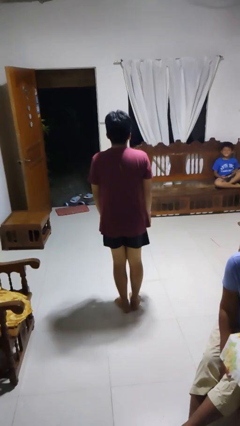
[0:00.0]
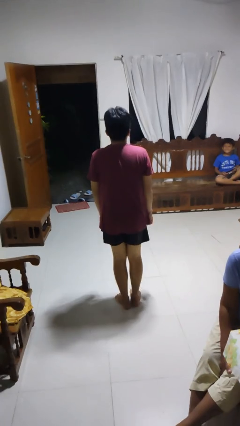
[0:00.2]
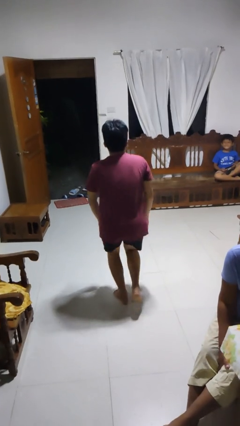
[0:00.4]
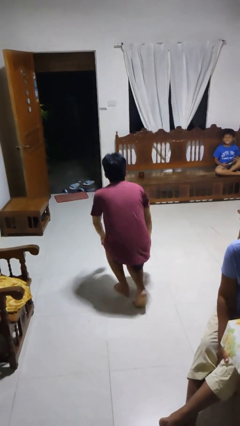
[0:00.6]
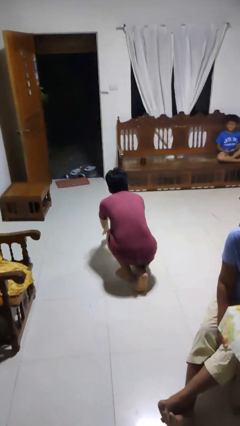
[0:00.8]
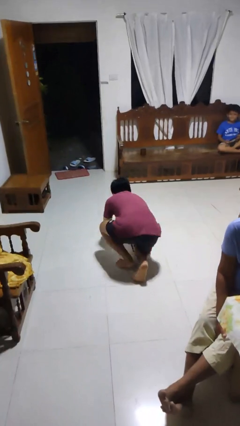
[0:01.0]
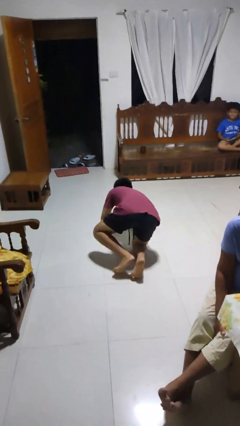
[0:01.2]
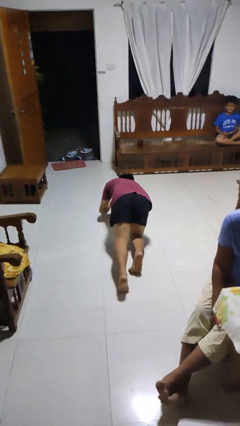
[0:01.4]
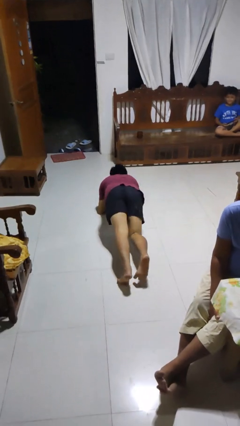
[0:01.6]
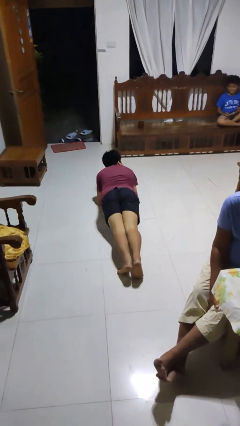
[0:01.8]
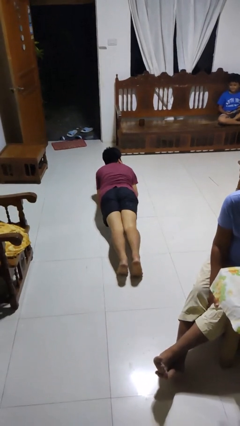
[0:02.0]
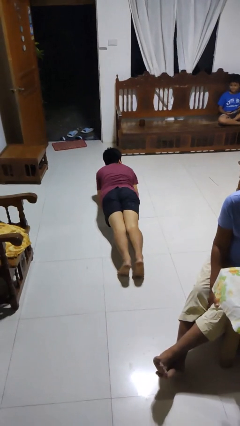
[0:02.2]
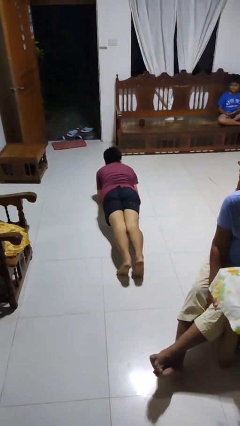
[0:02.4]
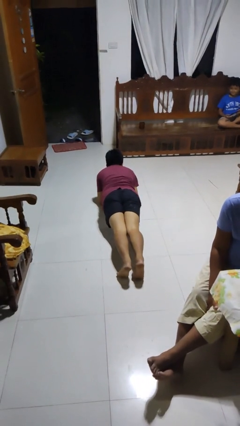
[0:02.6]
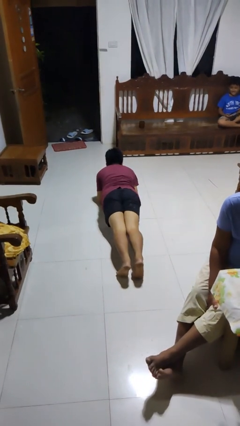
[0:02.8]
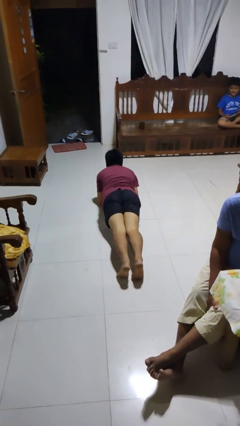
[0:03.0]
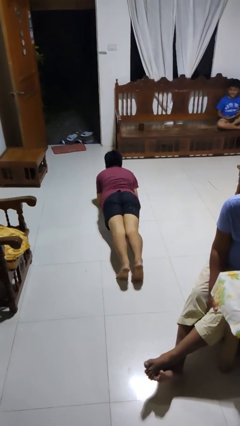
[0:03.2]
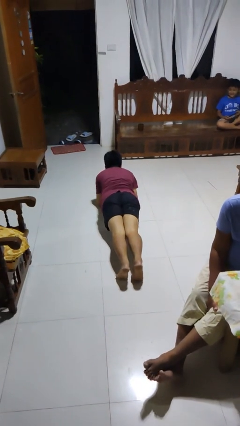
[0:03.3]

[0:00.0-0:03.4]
person exercises with plank

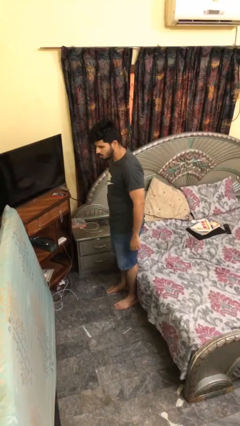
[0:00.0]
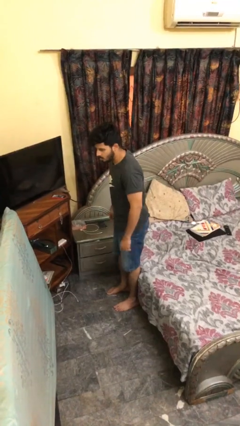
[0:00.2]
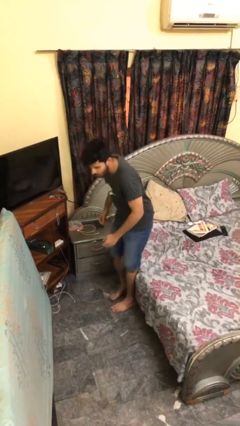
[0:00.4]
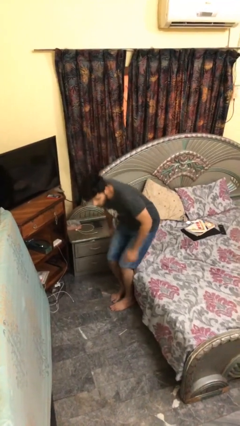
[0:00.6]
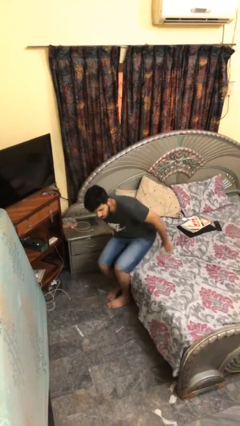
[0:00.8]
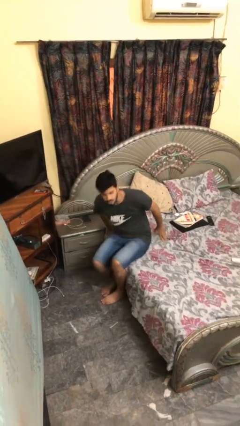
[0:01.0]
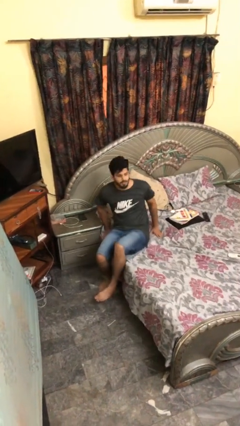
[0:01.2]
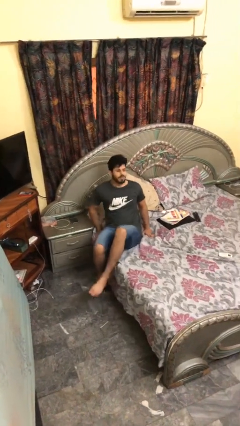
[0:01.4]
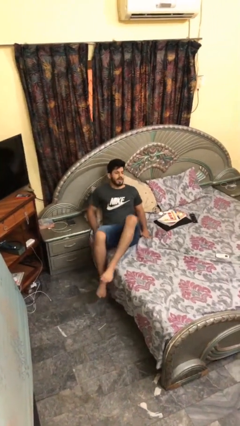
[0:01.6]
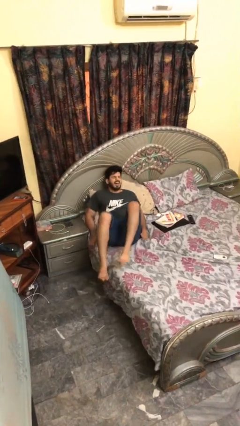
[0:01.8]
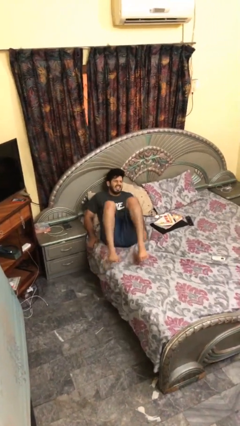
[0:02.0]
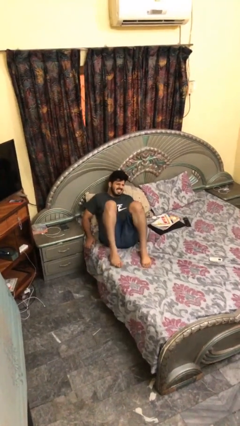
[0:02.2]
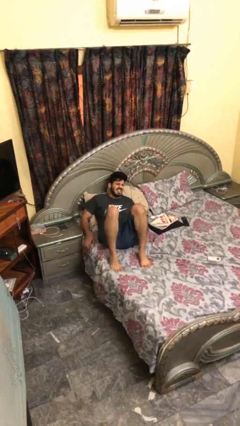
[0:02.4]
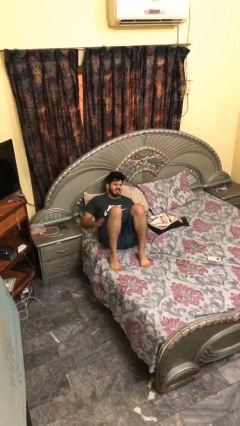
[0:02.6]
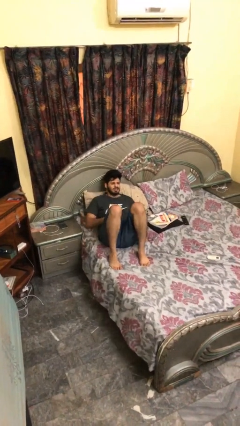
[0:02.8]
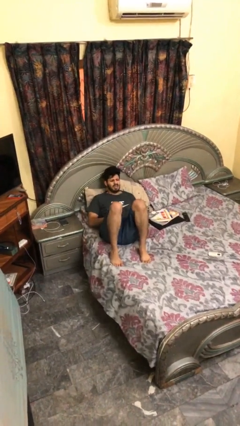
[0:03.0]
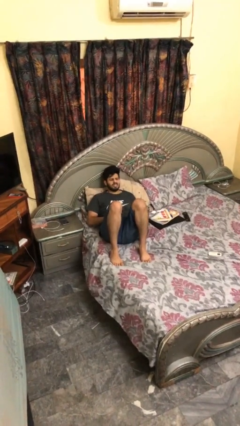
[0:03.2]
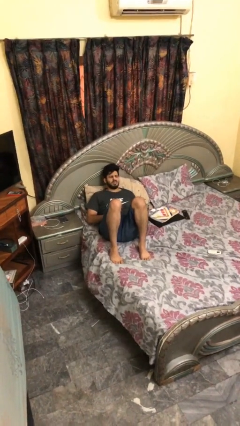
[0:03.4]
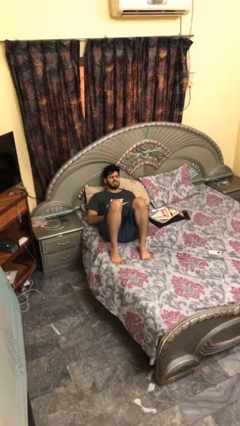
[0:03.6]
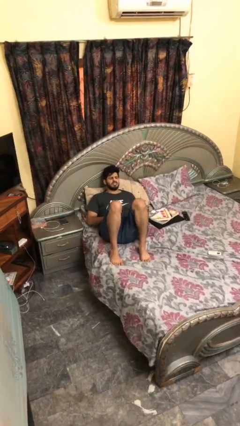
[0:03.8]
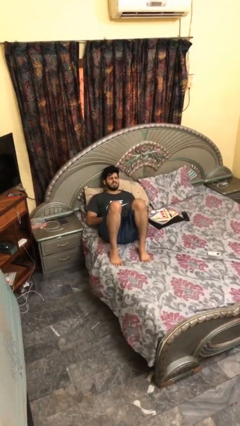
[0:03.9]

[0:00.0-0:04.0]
person lies down on bed

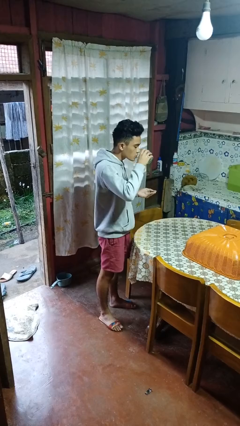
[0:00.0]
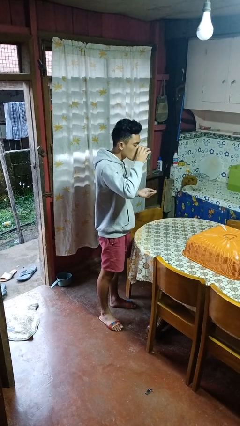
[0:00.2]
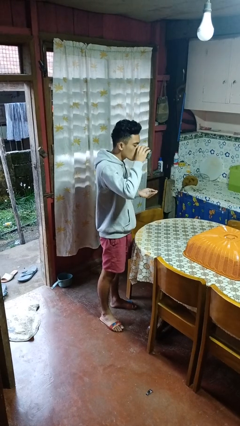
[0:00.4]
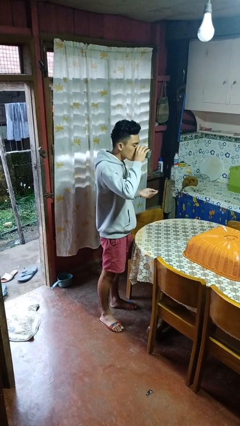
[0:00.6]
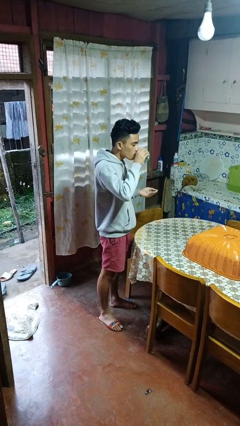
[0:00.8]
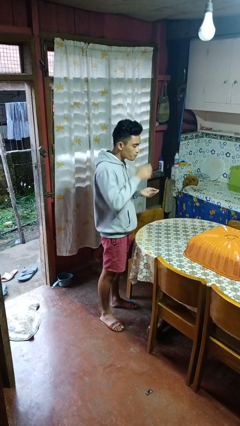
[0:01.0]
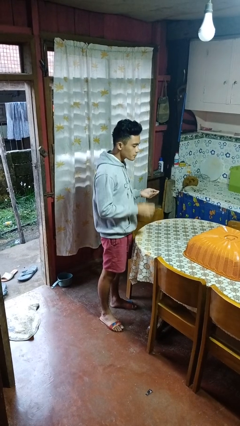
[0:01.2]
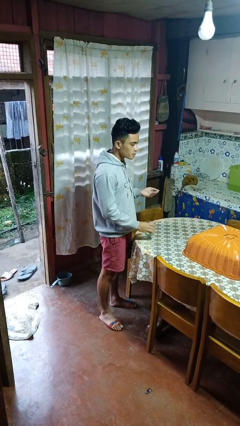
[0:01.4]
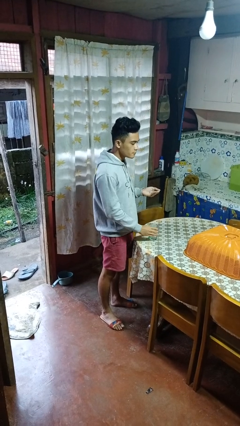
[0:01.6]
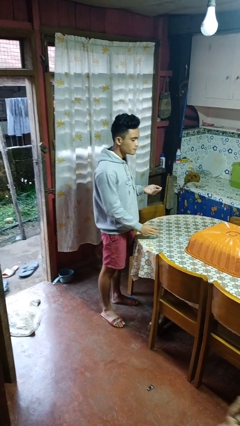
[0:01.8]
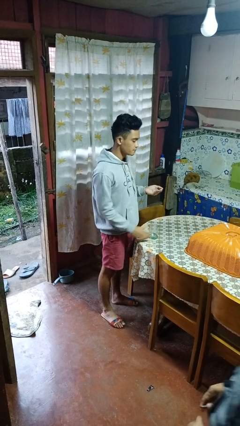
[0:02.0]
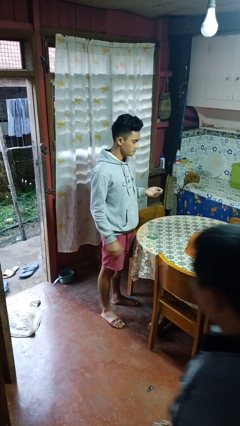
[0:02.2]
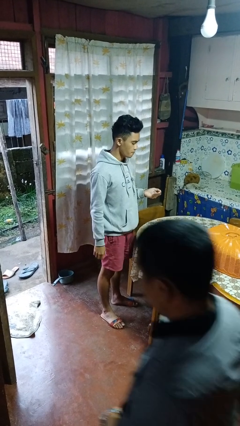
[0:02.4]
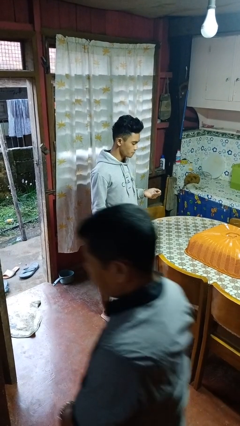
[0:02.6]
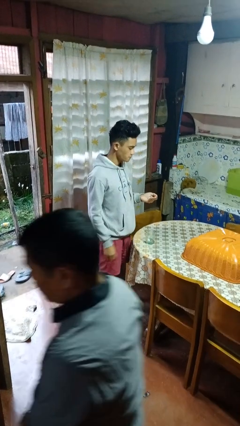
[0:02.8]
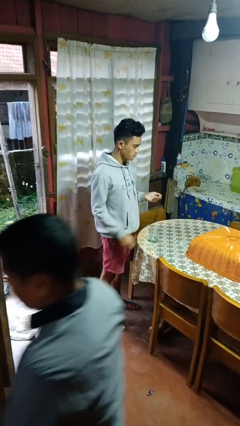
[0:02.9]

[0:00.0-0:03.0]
person drinks from cup

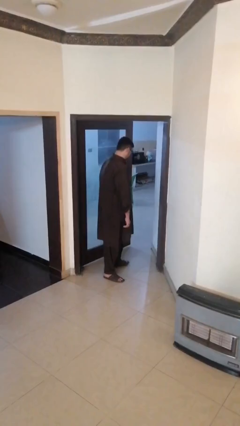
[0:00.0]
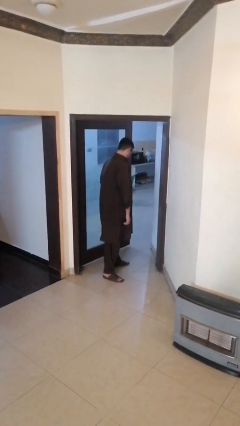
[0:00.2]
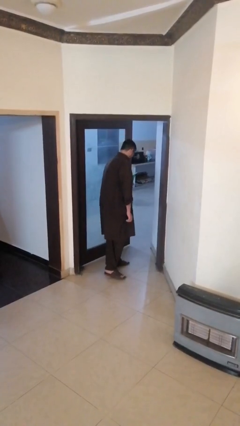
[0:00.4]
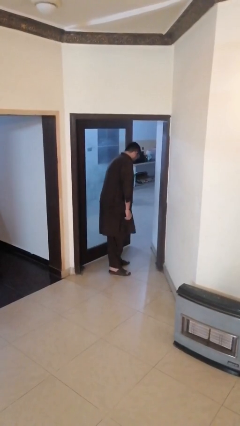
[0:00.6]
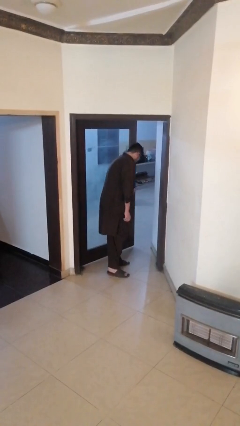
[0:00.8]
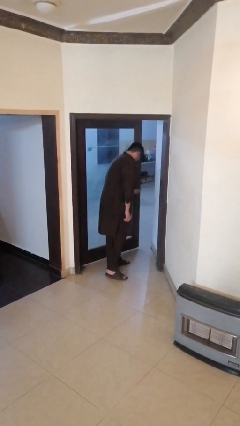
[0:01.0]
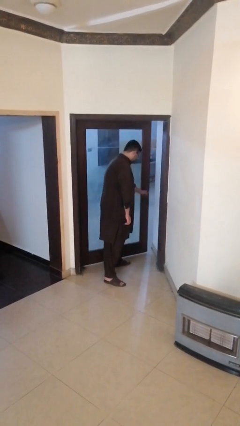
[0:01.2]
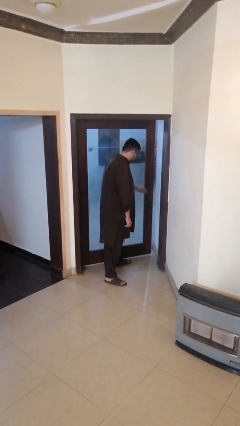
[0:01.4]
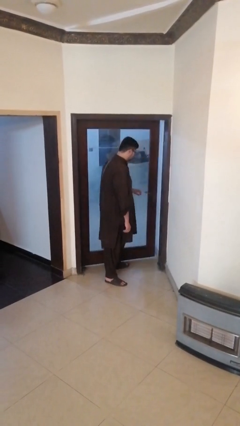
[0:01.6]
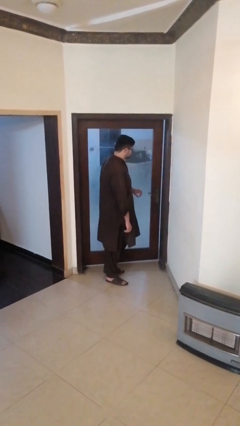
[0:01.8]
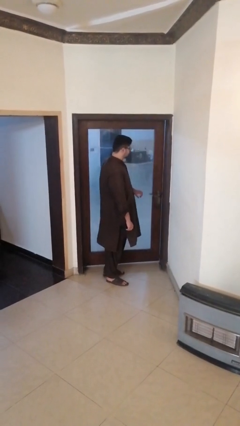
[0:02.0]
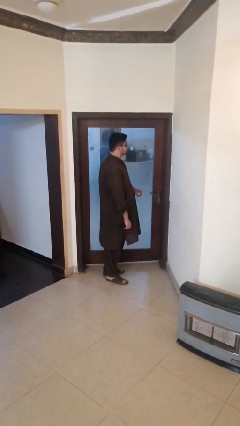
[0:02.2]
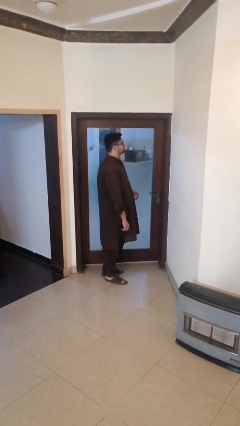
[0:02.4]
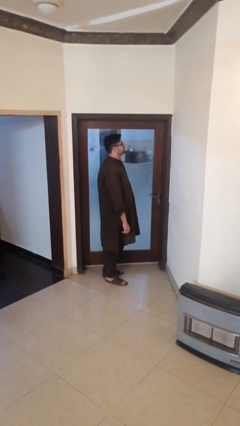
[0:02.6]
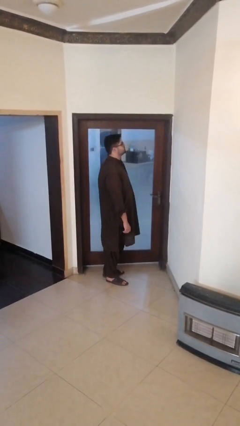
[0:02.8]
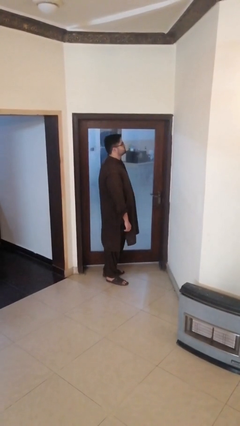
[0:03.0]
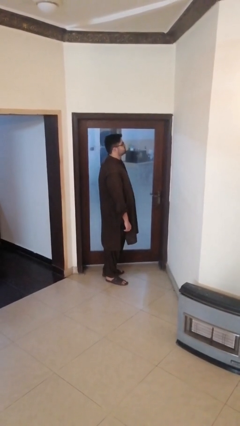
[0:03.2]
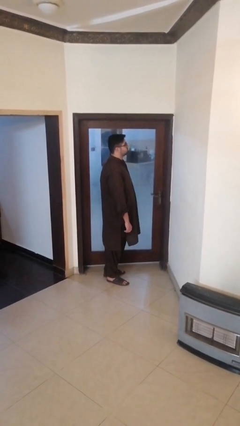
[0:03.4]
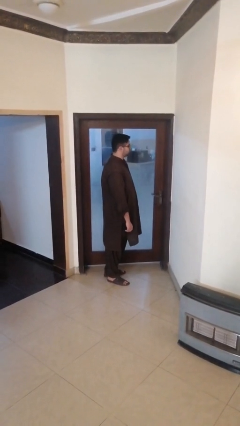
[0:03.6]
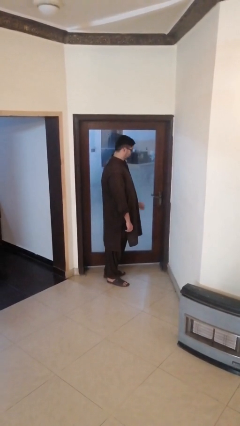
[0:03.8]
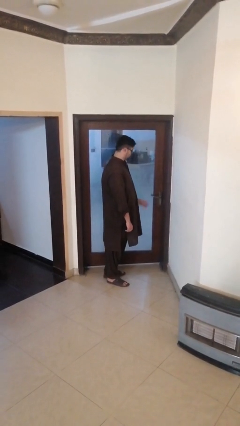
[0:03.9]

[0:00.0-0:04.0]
person closes facility door

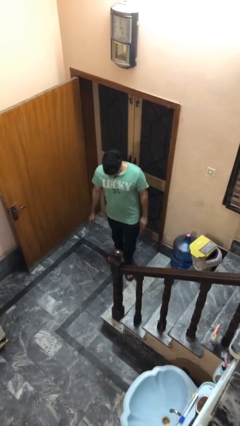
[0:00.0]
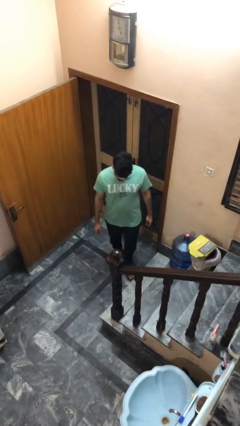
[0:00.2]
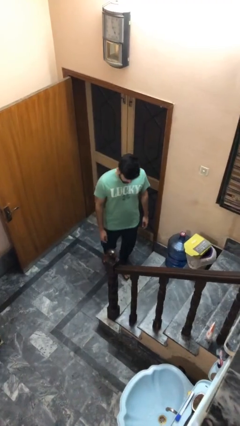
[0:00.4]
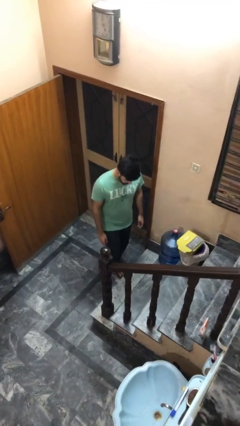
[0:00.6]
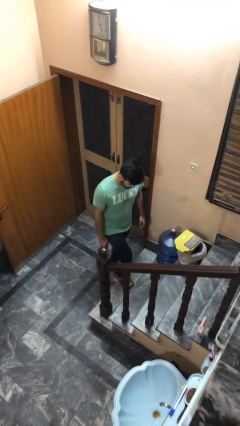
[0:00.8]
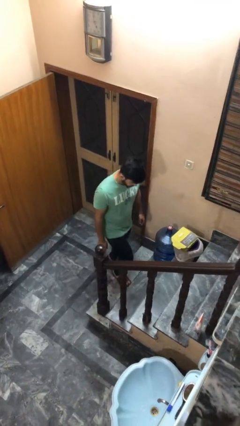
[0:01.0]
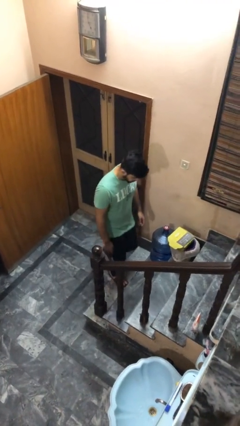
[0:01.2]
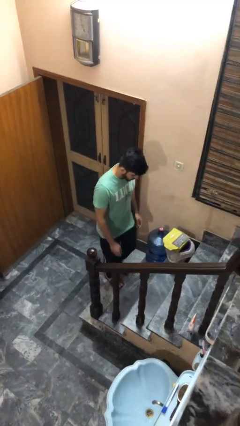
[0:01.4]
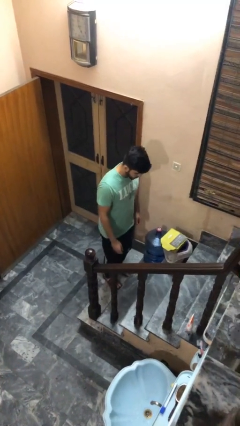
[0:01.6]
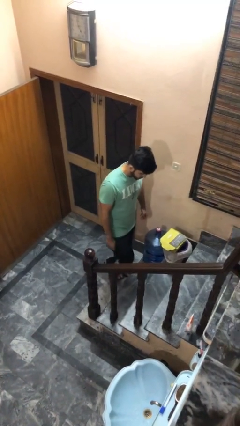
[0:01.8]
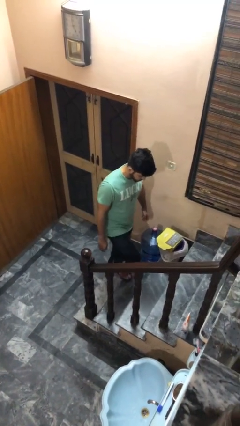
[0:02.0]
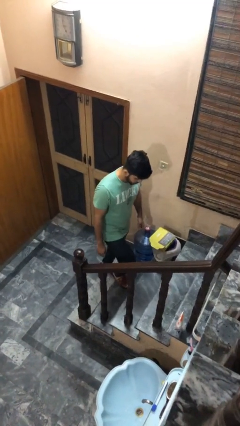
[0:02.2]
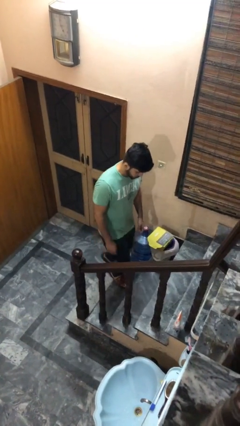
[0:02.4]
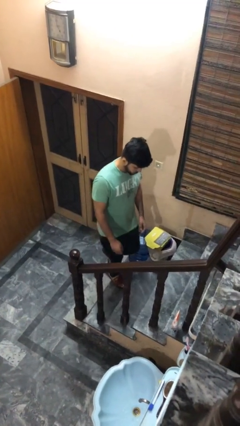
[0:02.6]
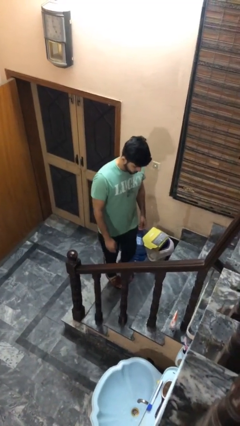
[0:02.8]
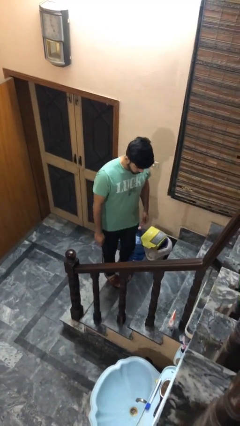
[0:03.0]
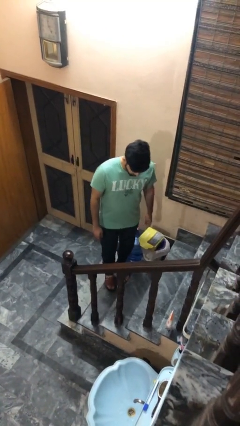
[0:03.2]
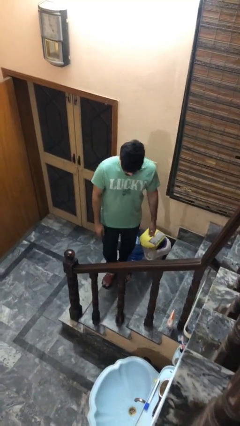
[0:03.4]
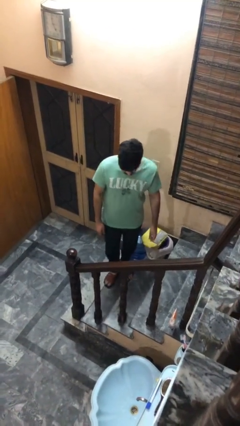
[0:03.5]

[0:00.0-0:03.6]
person climbs up stairs
